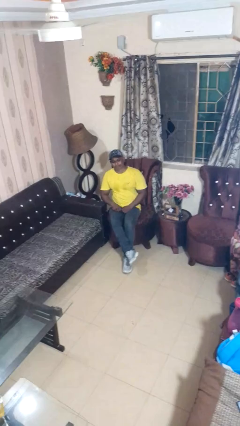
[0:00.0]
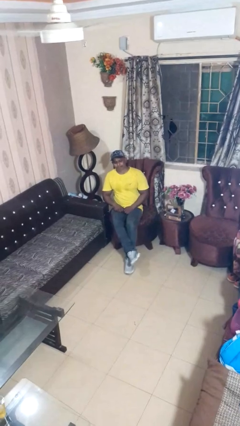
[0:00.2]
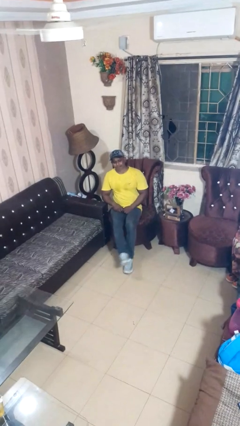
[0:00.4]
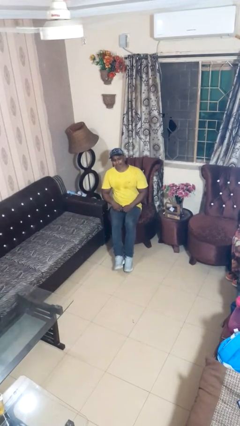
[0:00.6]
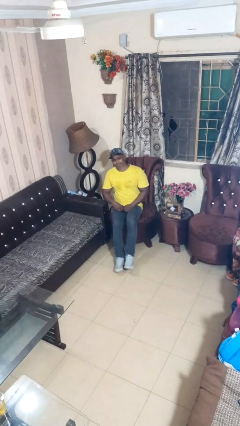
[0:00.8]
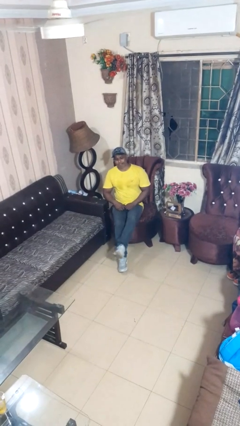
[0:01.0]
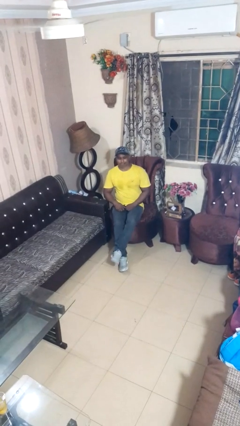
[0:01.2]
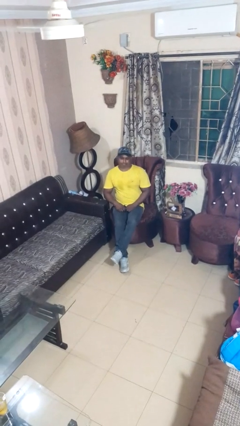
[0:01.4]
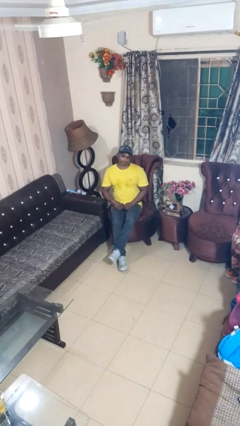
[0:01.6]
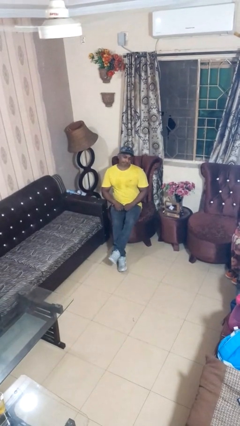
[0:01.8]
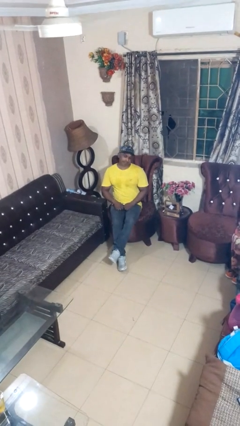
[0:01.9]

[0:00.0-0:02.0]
person crosses legs

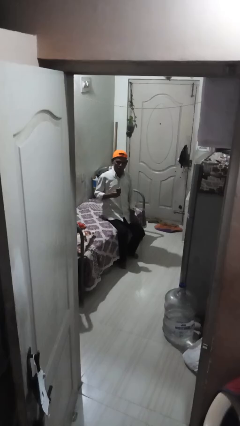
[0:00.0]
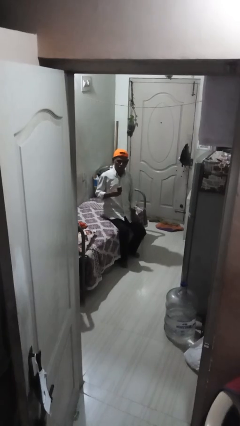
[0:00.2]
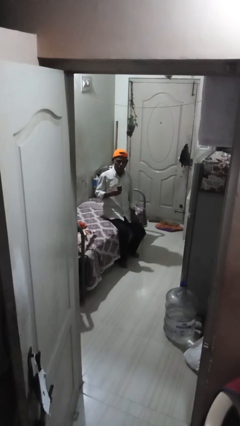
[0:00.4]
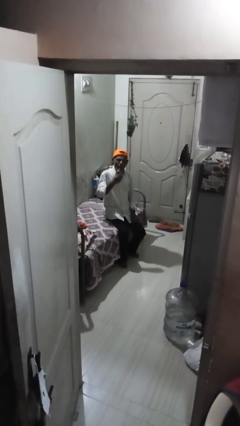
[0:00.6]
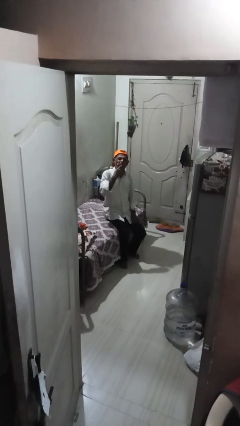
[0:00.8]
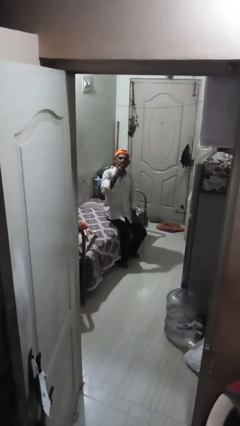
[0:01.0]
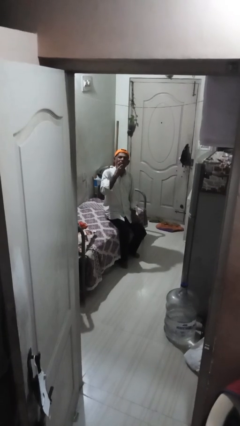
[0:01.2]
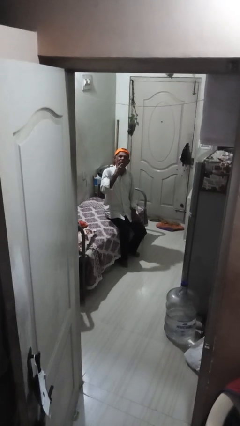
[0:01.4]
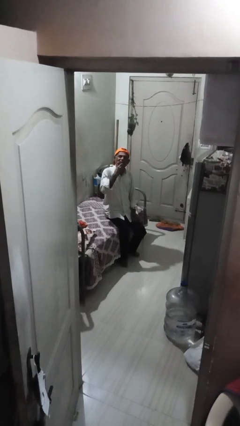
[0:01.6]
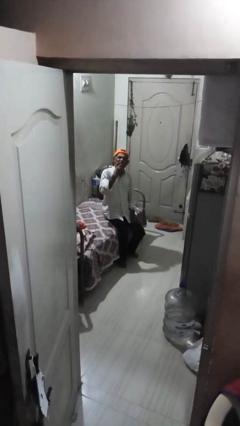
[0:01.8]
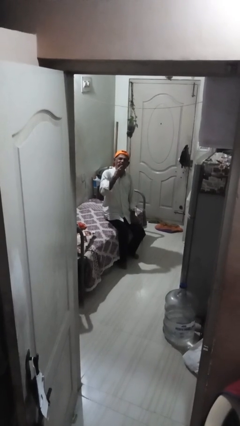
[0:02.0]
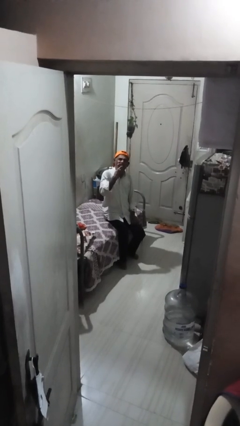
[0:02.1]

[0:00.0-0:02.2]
person eats apple

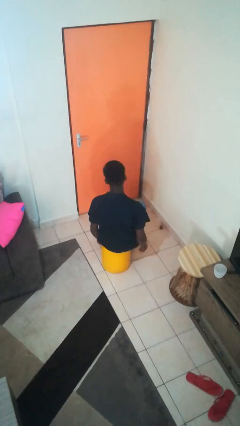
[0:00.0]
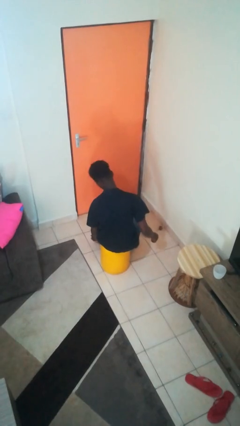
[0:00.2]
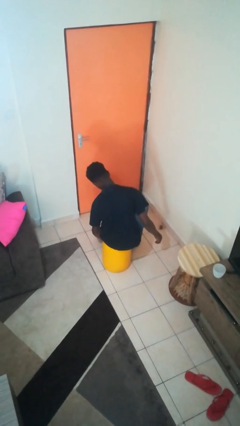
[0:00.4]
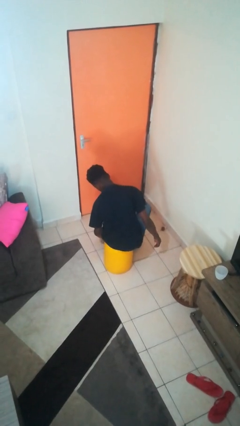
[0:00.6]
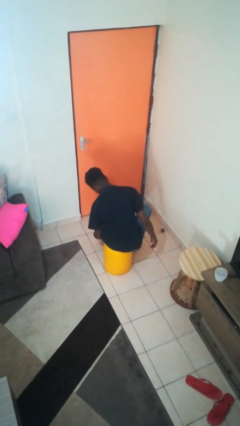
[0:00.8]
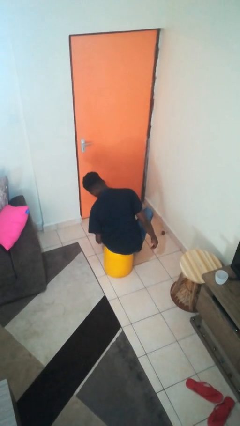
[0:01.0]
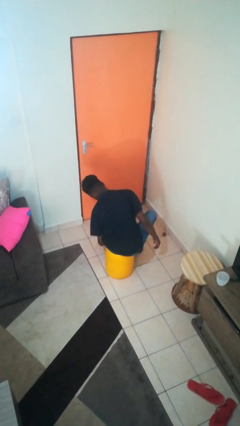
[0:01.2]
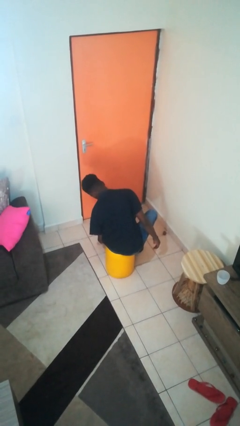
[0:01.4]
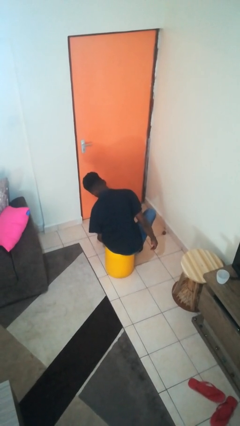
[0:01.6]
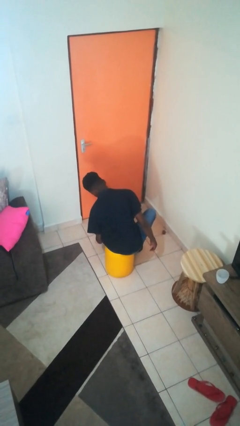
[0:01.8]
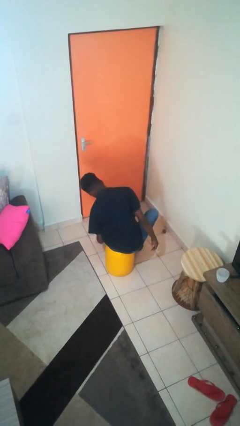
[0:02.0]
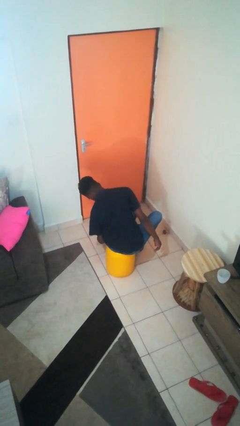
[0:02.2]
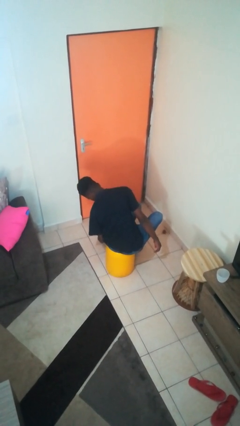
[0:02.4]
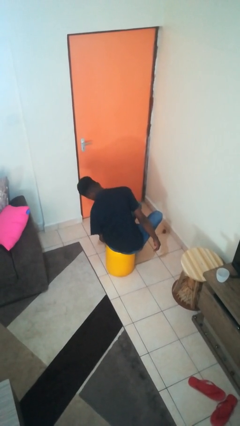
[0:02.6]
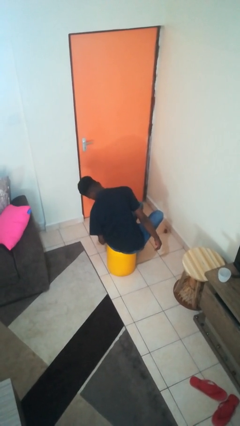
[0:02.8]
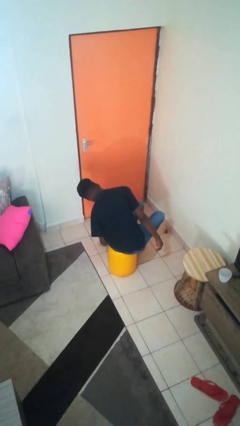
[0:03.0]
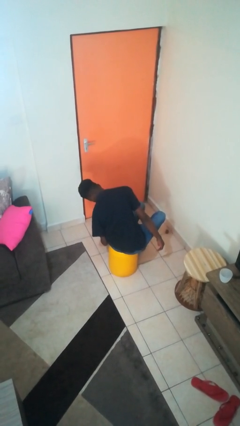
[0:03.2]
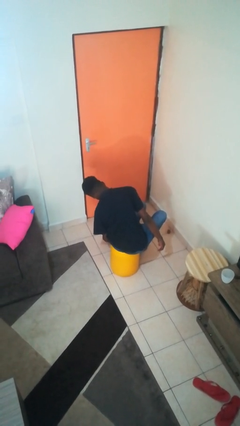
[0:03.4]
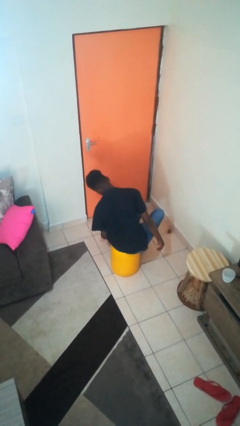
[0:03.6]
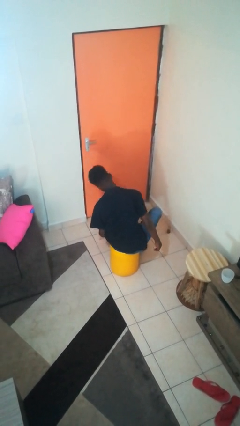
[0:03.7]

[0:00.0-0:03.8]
person rubs foot

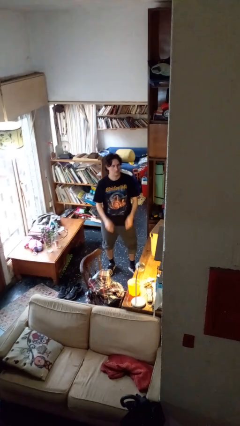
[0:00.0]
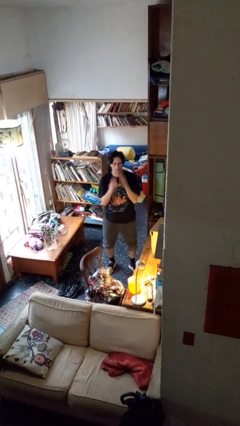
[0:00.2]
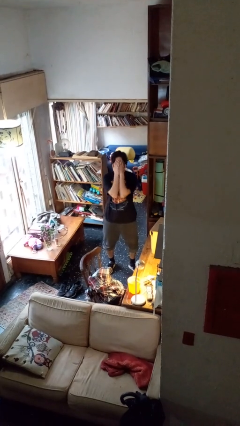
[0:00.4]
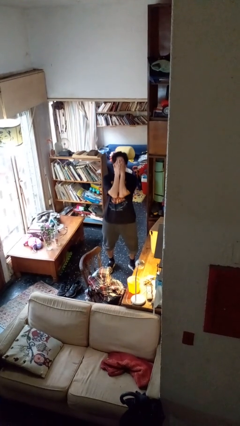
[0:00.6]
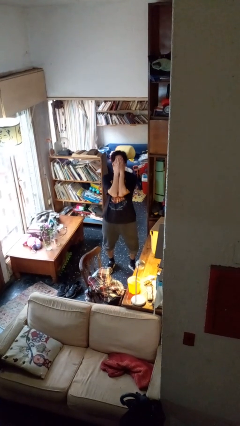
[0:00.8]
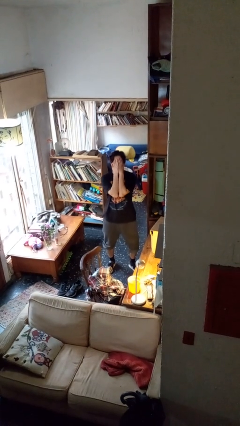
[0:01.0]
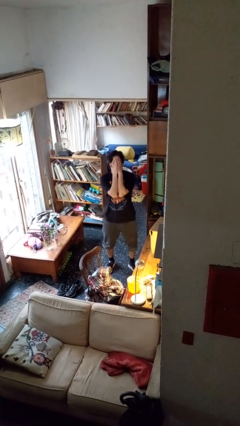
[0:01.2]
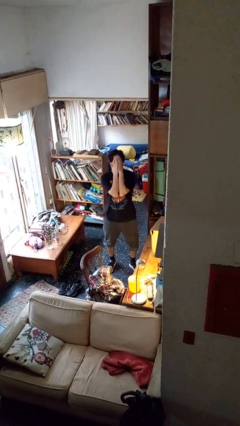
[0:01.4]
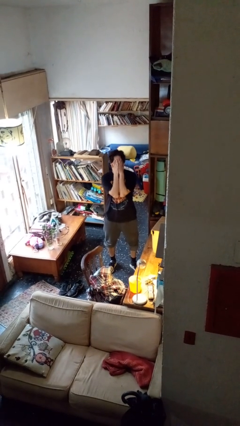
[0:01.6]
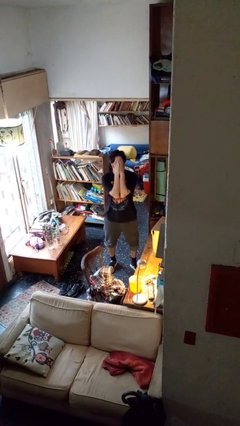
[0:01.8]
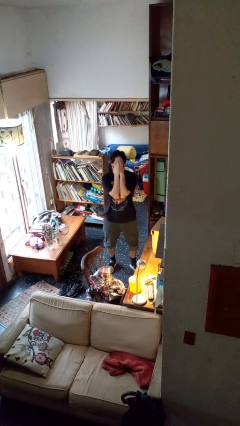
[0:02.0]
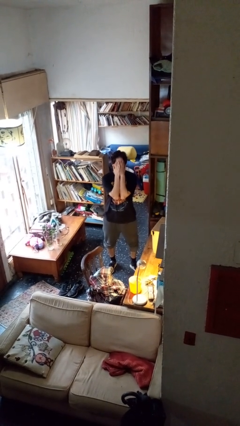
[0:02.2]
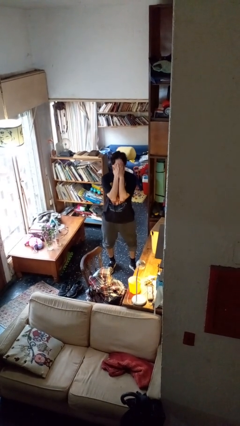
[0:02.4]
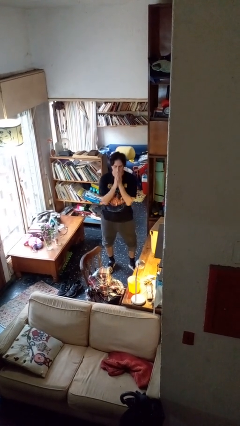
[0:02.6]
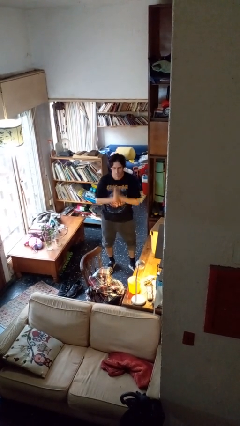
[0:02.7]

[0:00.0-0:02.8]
person covers face with hands

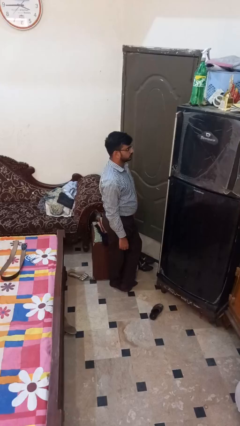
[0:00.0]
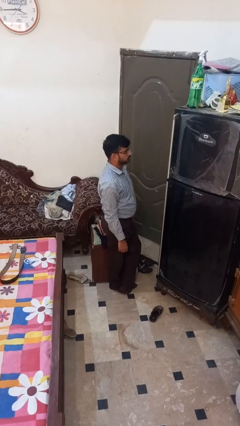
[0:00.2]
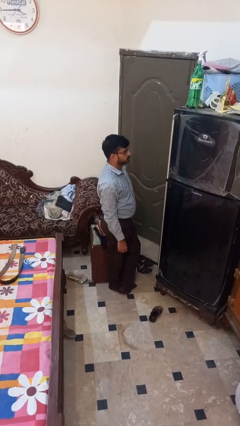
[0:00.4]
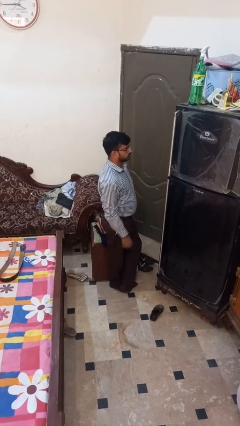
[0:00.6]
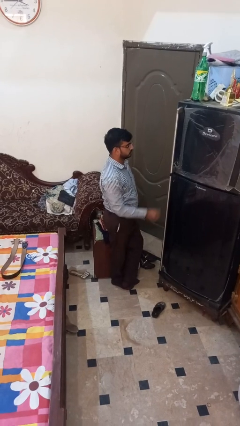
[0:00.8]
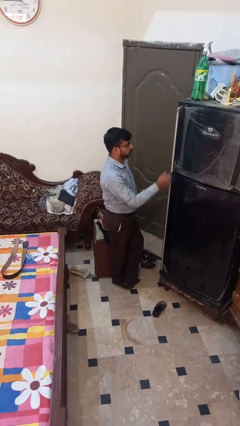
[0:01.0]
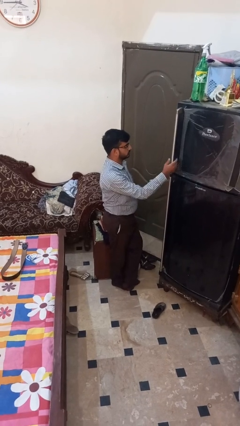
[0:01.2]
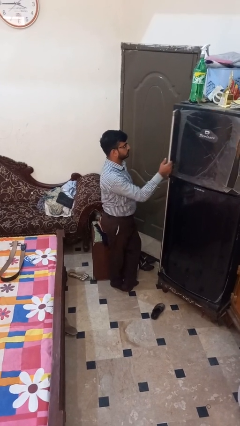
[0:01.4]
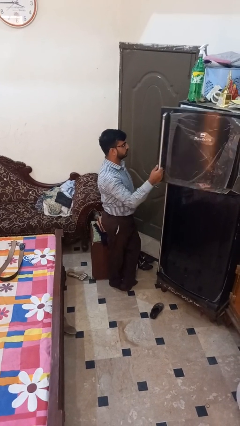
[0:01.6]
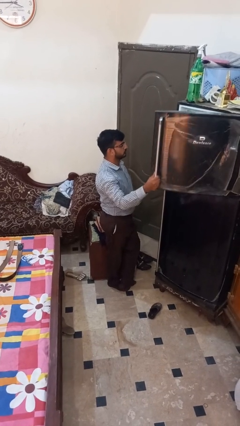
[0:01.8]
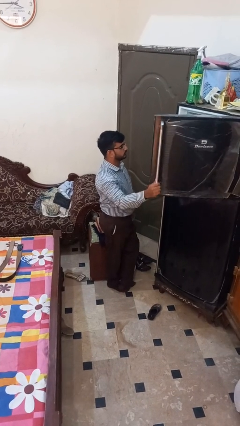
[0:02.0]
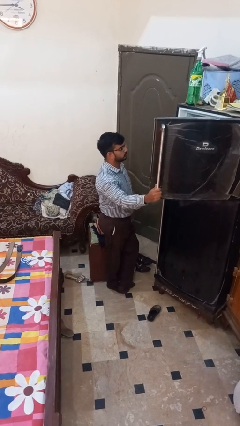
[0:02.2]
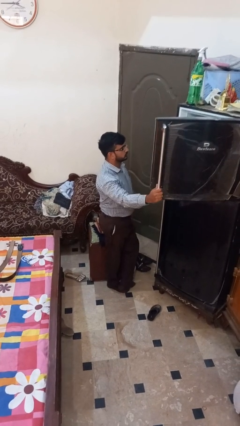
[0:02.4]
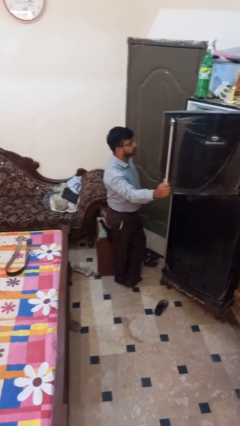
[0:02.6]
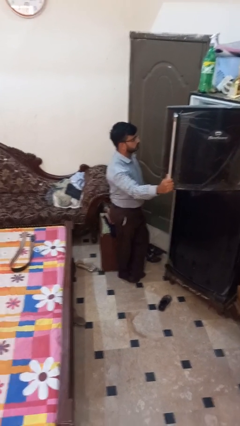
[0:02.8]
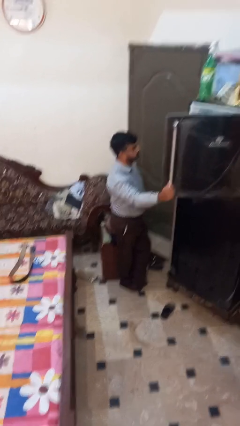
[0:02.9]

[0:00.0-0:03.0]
person opens refrigerator

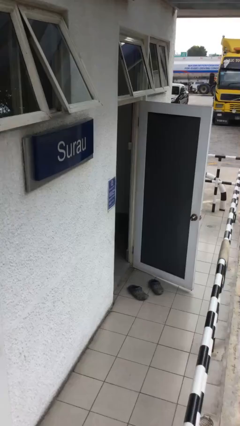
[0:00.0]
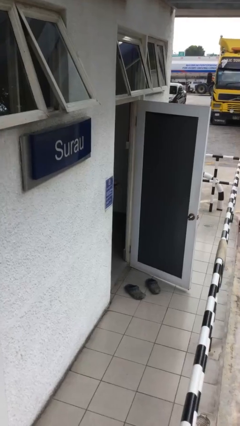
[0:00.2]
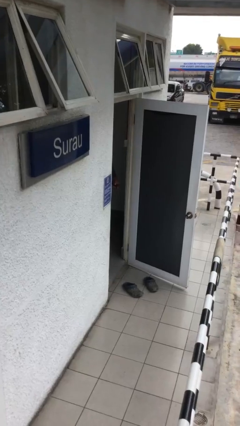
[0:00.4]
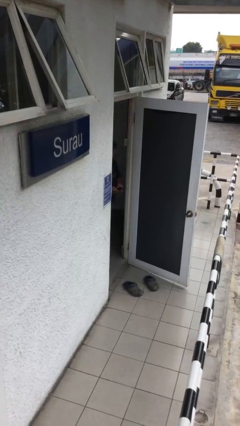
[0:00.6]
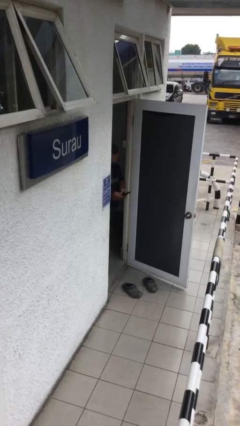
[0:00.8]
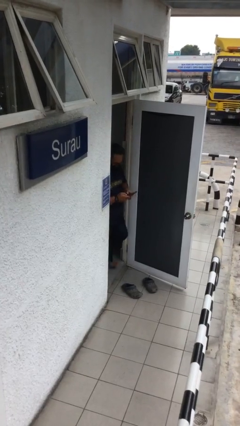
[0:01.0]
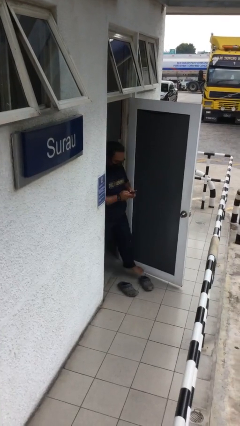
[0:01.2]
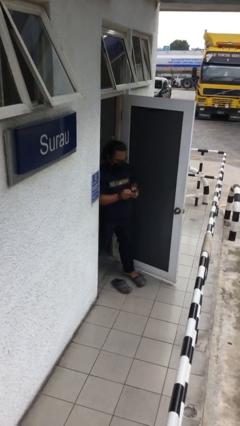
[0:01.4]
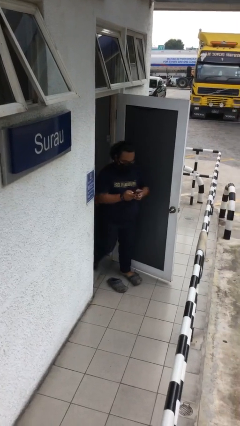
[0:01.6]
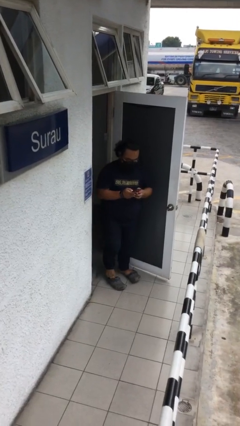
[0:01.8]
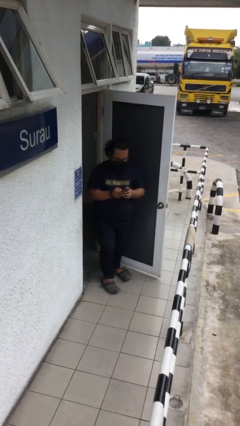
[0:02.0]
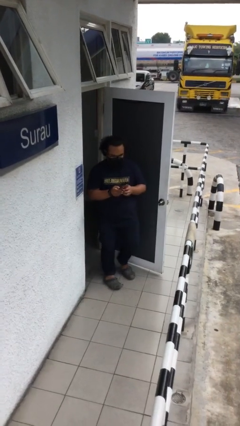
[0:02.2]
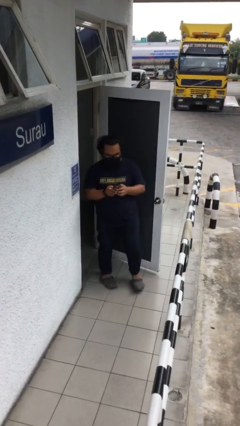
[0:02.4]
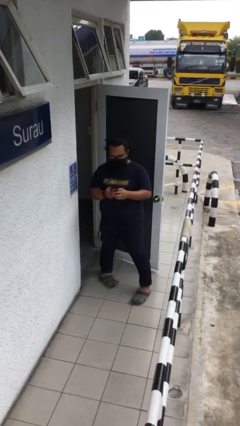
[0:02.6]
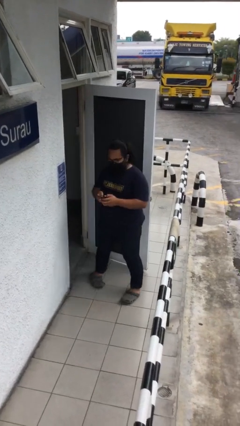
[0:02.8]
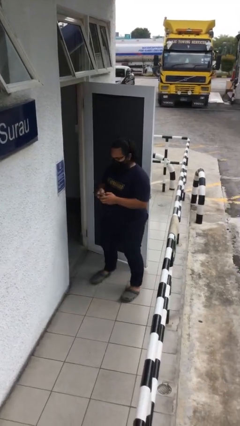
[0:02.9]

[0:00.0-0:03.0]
person enters scene through structure

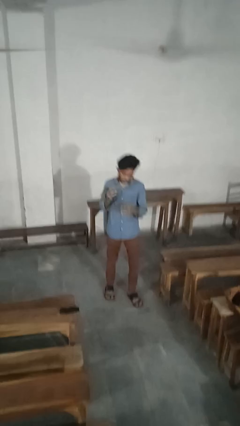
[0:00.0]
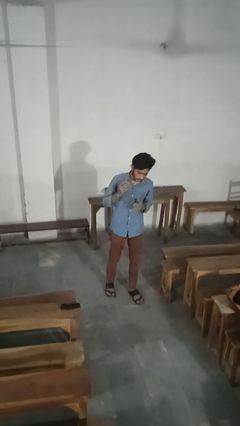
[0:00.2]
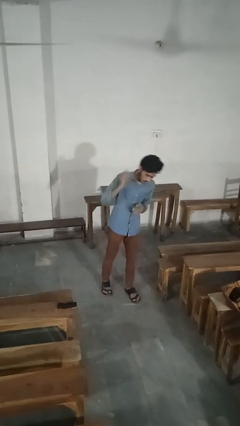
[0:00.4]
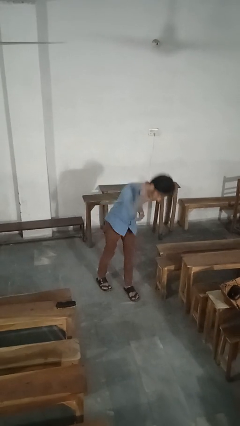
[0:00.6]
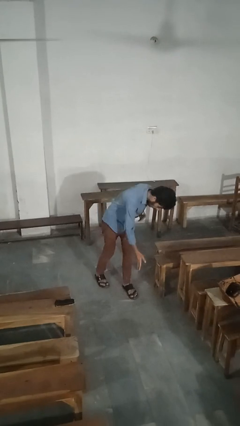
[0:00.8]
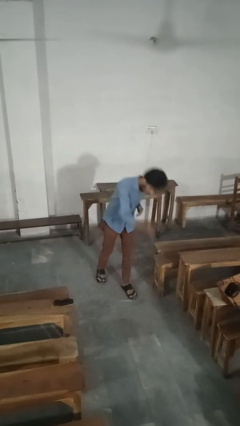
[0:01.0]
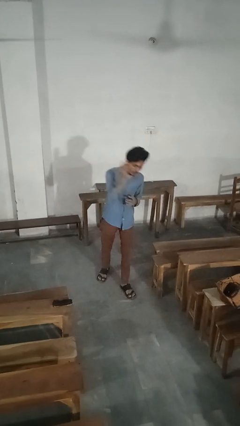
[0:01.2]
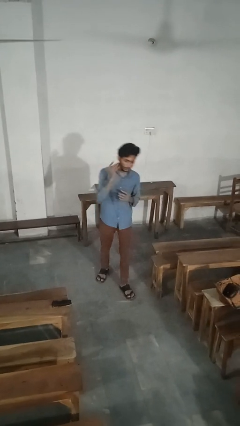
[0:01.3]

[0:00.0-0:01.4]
person karate chop
